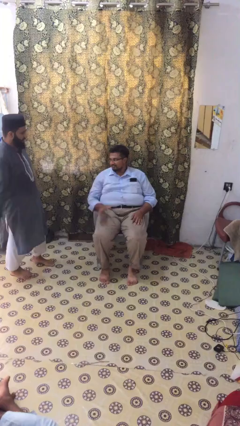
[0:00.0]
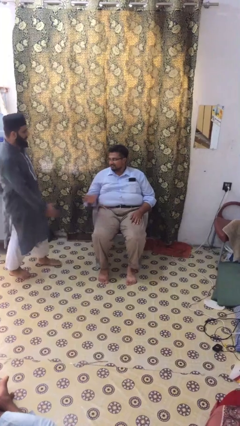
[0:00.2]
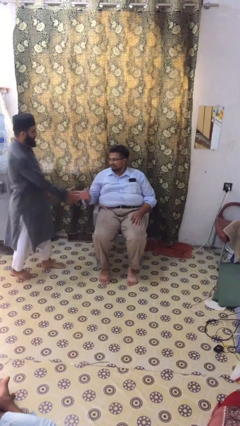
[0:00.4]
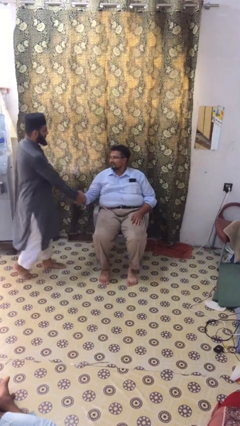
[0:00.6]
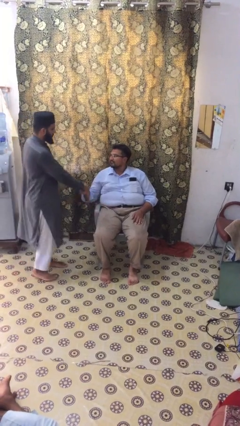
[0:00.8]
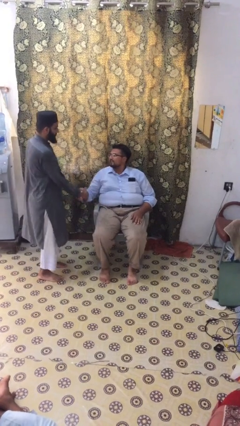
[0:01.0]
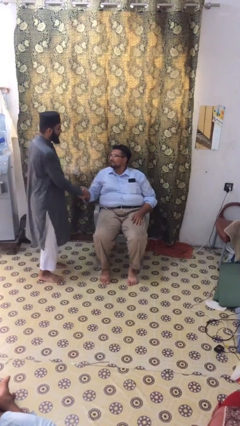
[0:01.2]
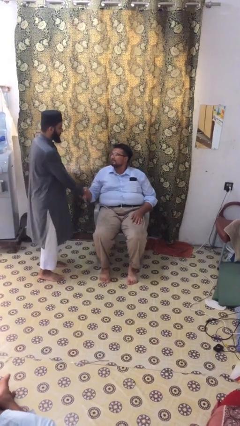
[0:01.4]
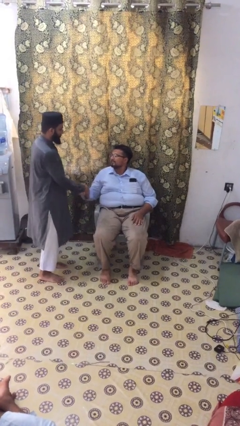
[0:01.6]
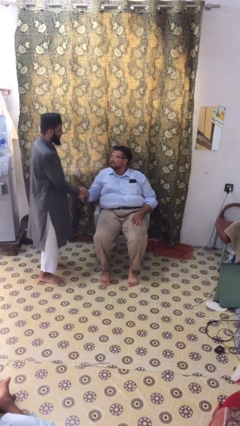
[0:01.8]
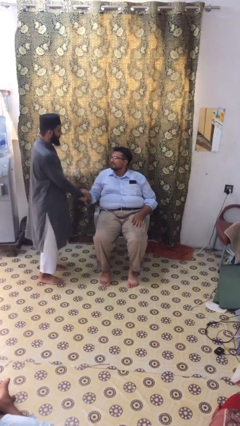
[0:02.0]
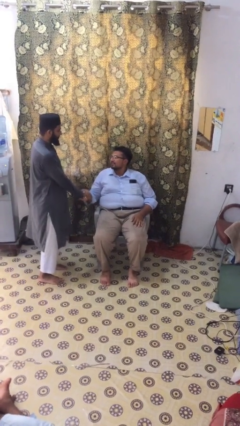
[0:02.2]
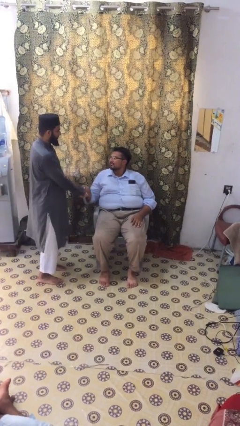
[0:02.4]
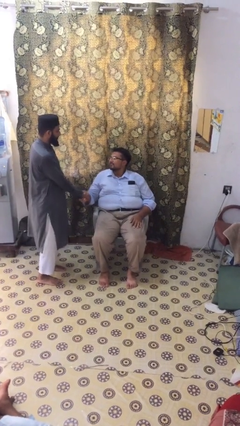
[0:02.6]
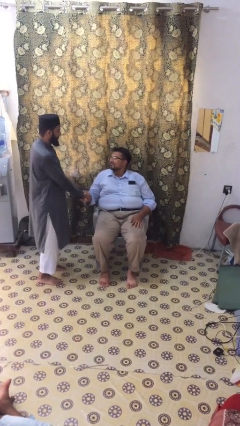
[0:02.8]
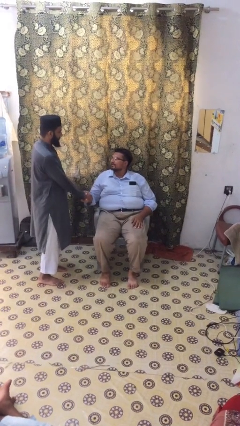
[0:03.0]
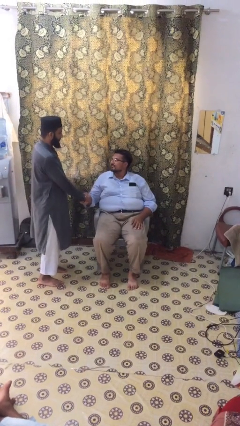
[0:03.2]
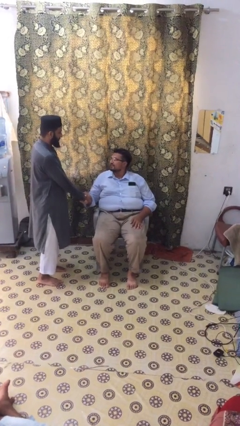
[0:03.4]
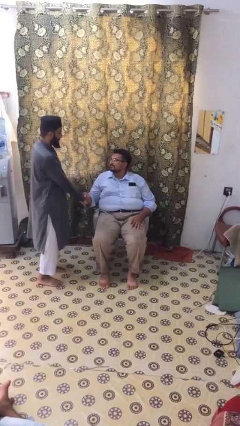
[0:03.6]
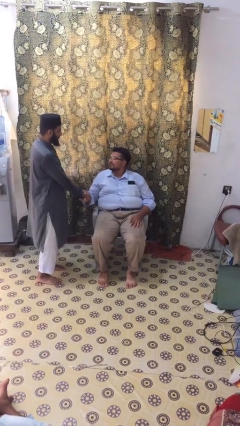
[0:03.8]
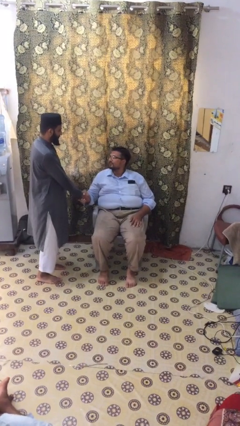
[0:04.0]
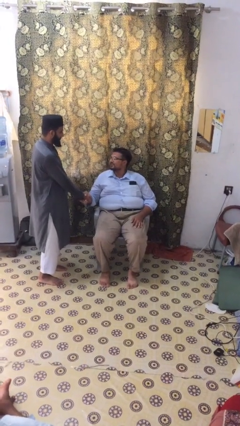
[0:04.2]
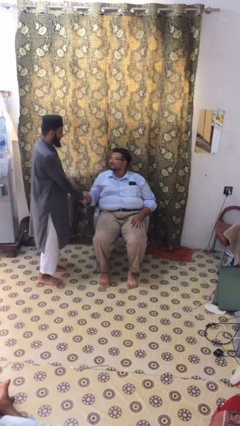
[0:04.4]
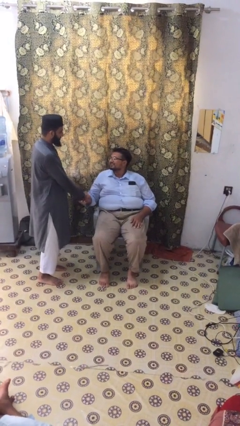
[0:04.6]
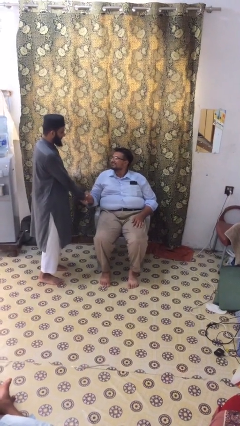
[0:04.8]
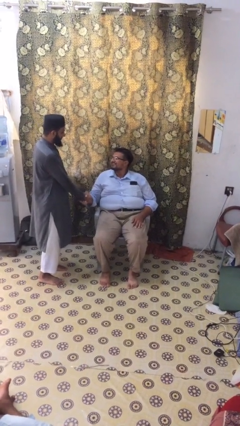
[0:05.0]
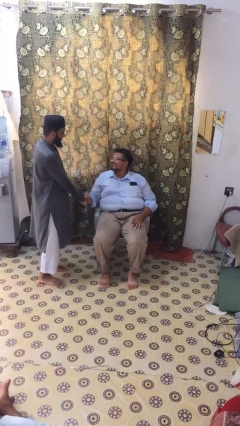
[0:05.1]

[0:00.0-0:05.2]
person shakes hand

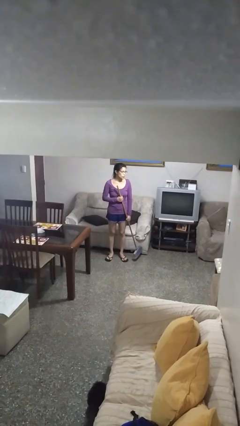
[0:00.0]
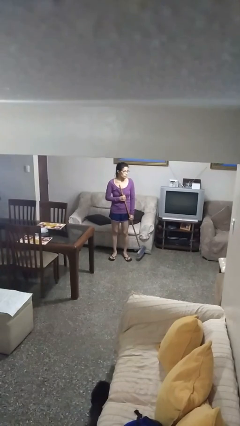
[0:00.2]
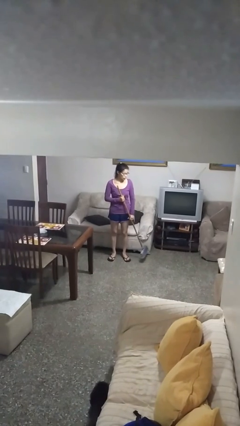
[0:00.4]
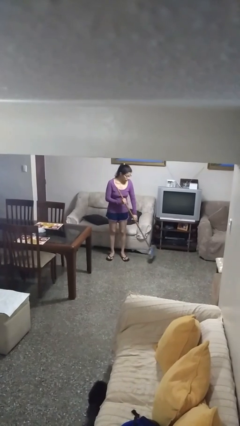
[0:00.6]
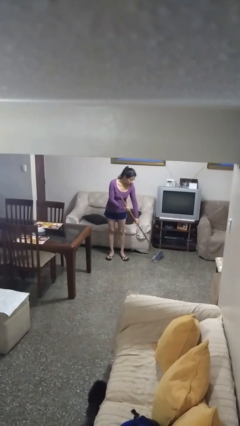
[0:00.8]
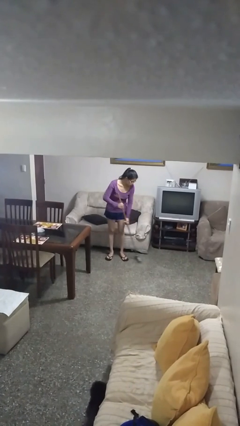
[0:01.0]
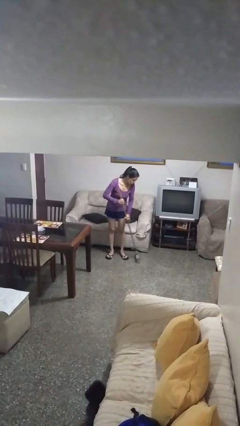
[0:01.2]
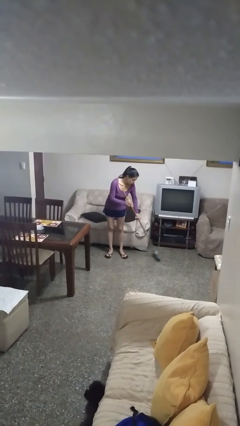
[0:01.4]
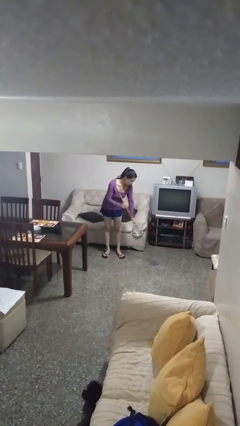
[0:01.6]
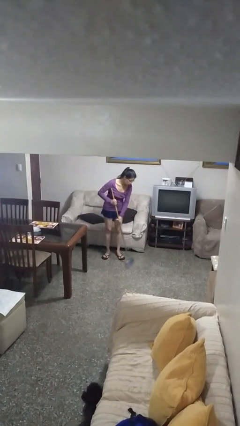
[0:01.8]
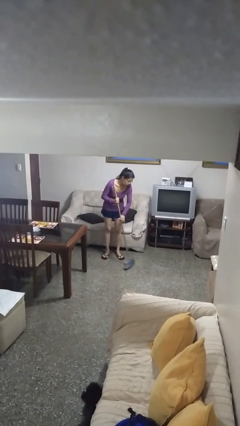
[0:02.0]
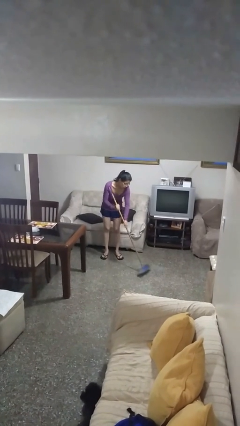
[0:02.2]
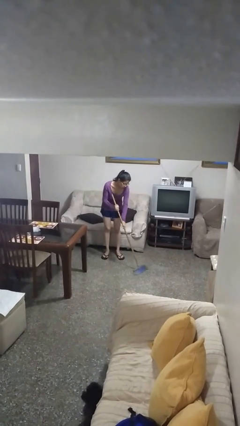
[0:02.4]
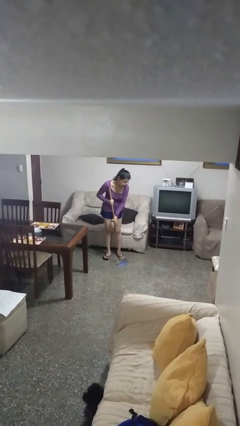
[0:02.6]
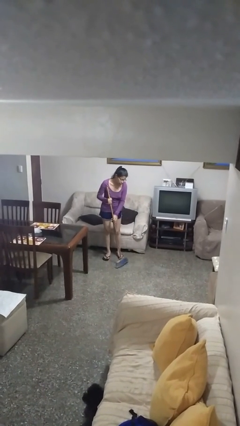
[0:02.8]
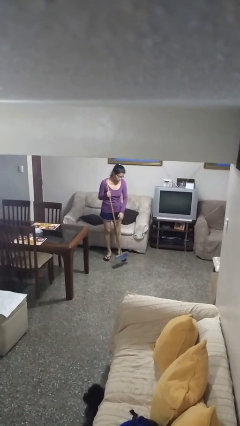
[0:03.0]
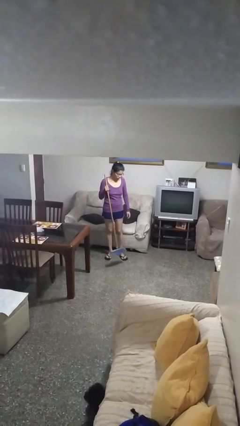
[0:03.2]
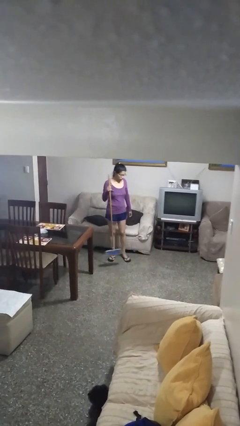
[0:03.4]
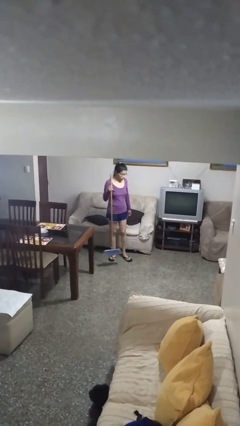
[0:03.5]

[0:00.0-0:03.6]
person sweeps floor

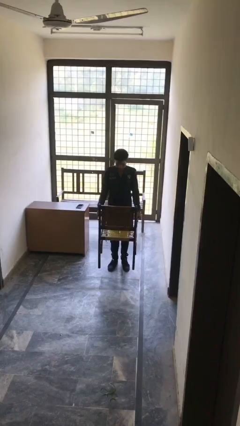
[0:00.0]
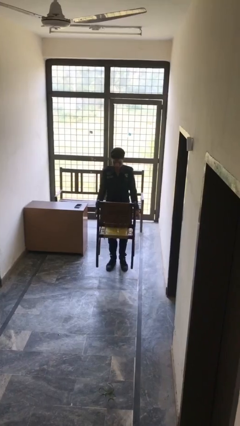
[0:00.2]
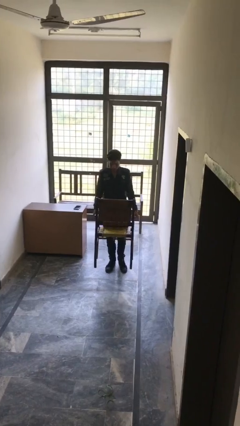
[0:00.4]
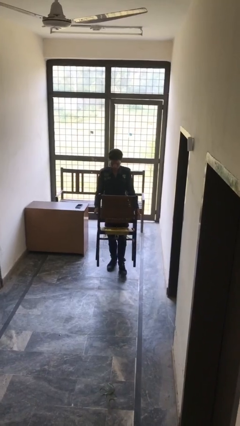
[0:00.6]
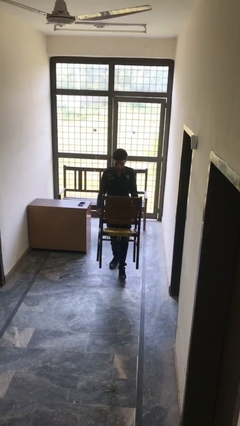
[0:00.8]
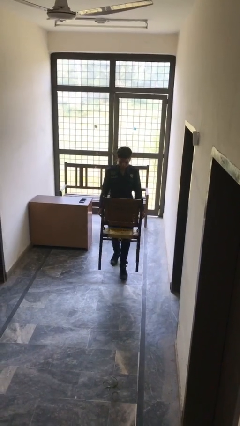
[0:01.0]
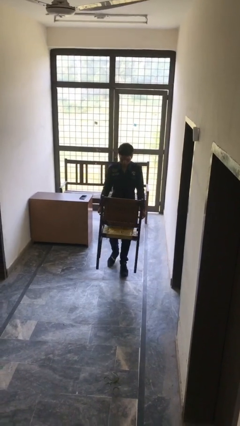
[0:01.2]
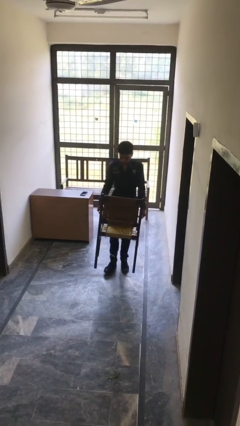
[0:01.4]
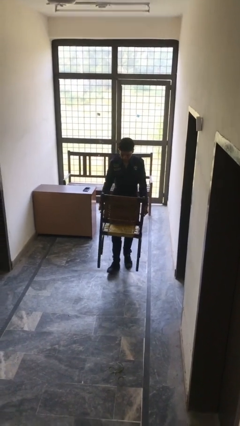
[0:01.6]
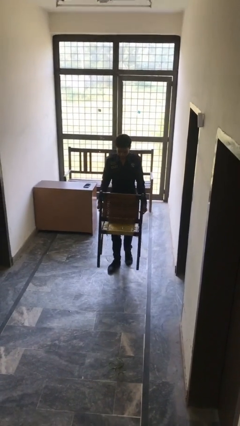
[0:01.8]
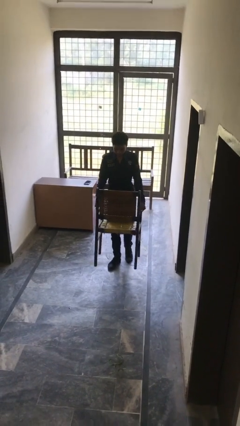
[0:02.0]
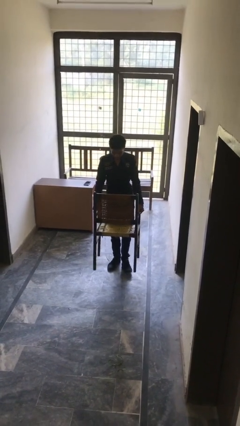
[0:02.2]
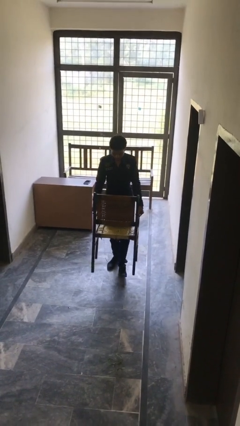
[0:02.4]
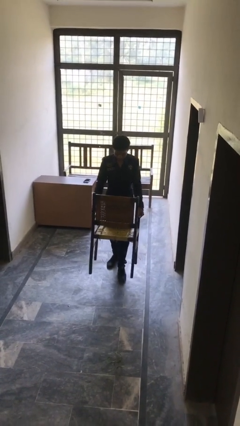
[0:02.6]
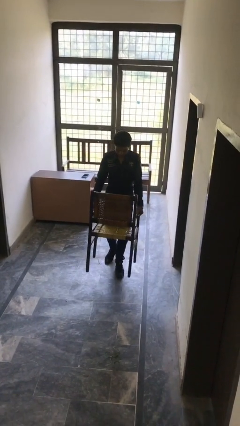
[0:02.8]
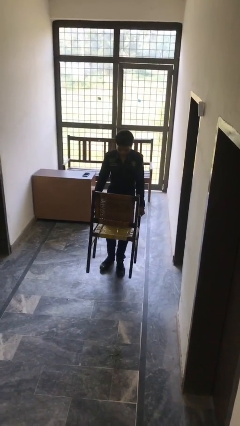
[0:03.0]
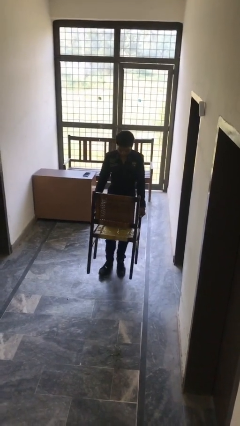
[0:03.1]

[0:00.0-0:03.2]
person reads document

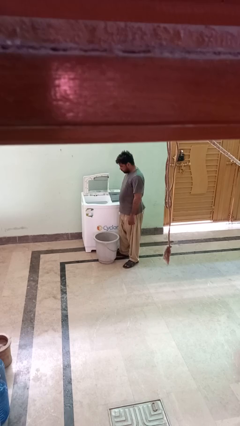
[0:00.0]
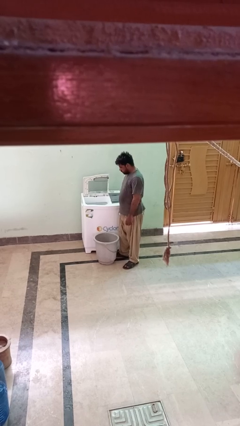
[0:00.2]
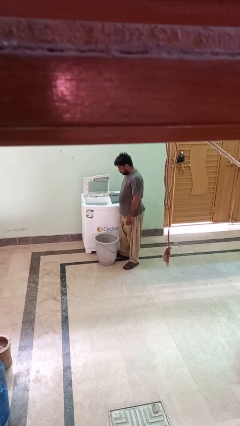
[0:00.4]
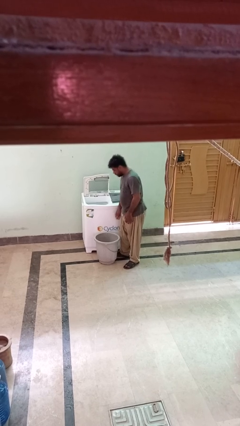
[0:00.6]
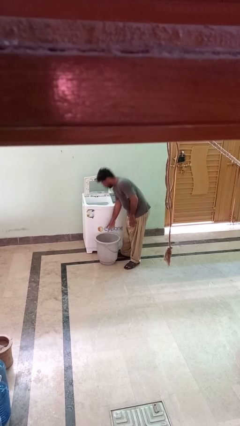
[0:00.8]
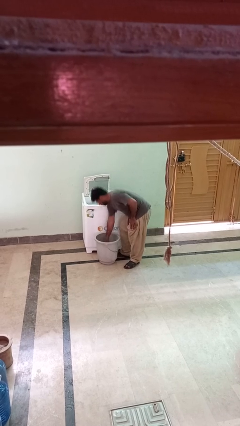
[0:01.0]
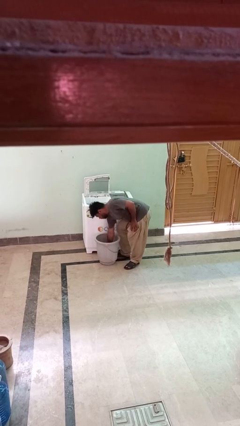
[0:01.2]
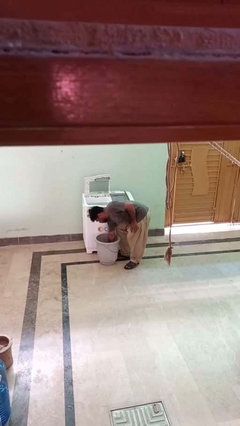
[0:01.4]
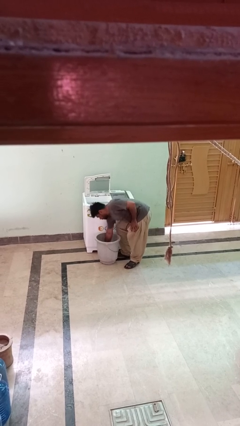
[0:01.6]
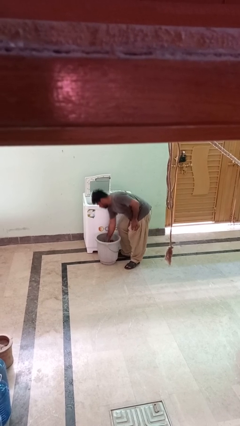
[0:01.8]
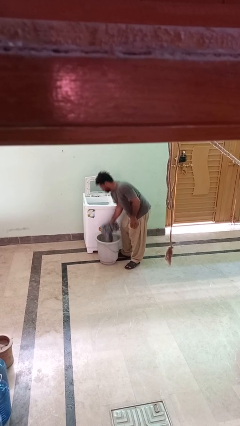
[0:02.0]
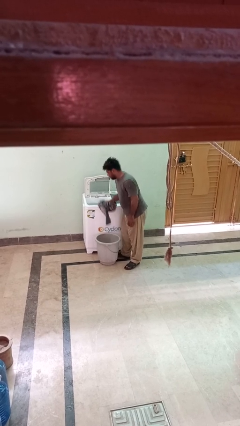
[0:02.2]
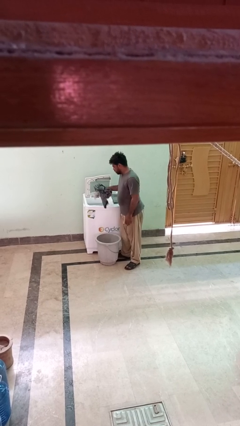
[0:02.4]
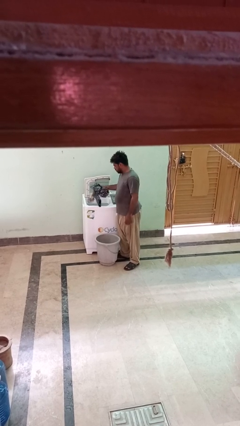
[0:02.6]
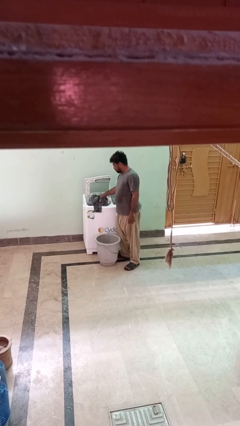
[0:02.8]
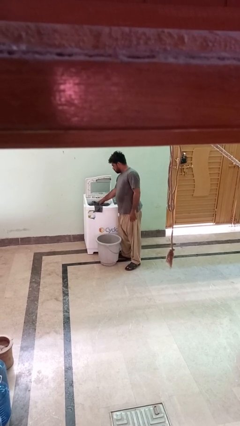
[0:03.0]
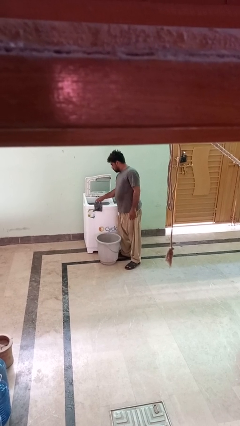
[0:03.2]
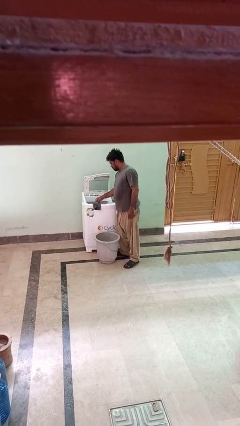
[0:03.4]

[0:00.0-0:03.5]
person loads clotheswasher

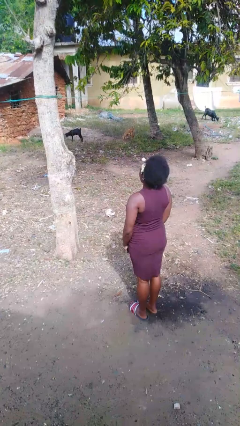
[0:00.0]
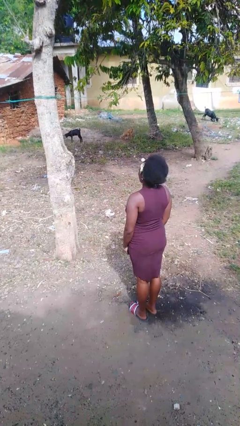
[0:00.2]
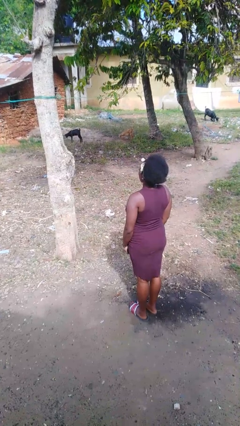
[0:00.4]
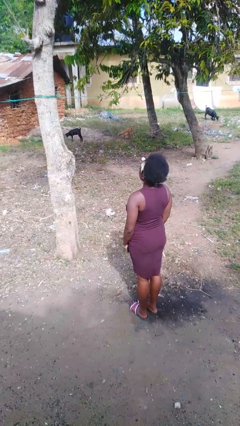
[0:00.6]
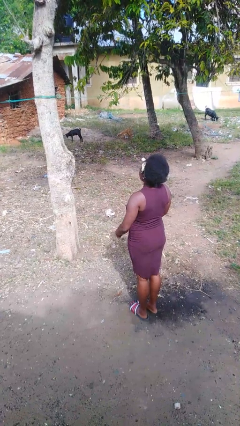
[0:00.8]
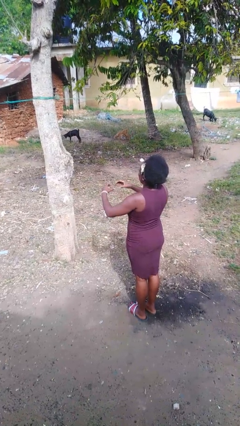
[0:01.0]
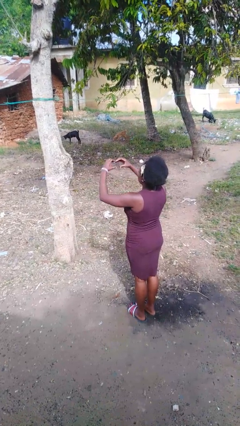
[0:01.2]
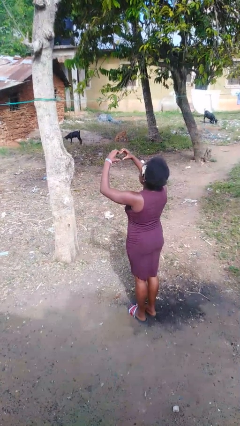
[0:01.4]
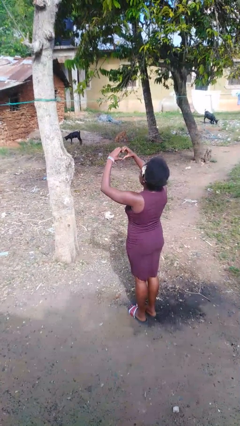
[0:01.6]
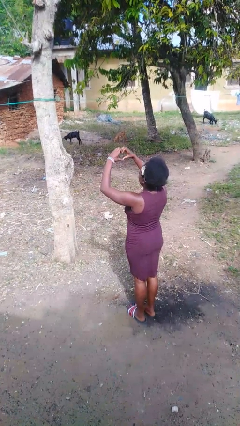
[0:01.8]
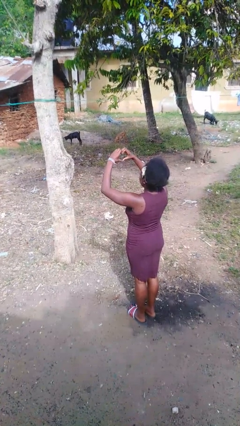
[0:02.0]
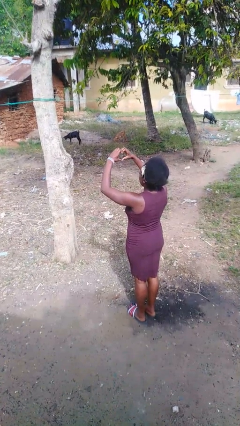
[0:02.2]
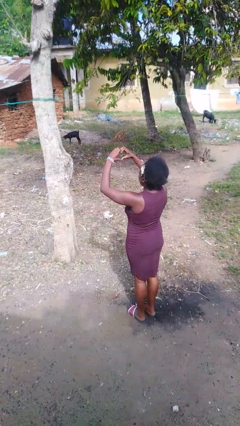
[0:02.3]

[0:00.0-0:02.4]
person gestures heart
